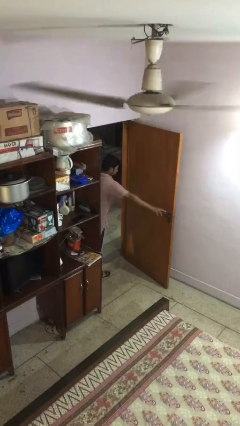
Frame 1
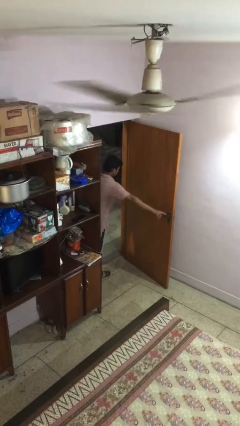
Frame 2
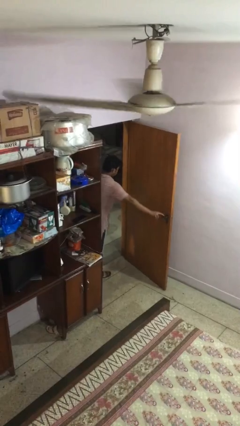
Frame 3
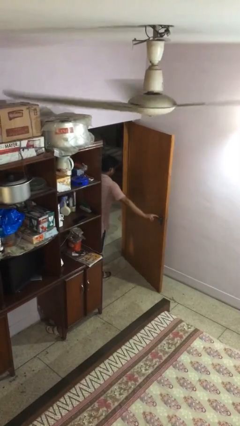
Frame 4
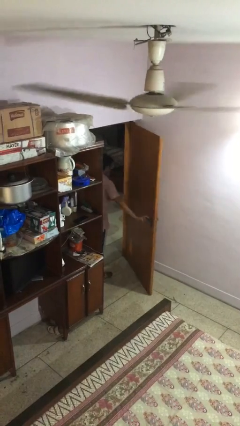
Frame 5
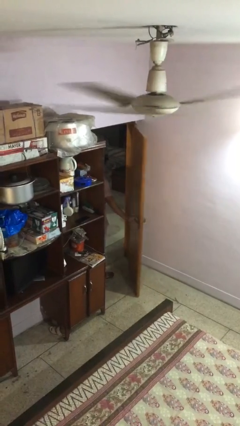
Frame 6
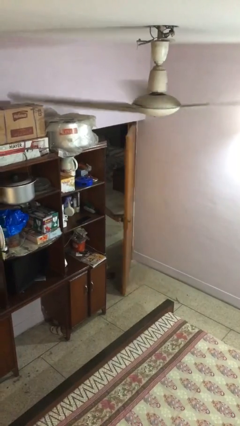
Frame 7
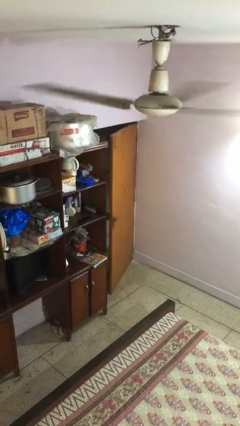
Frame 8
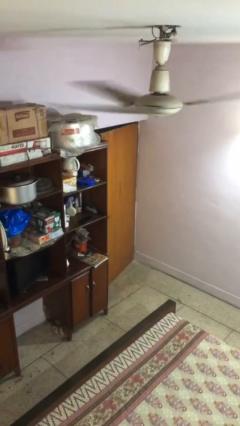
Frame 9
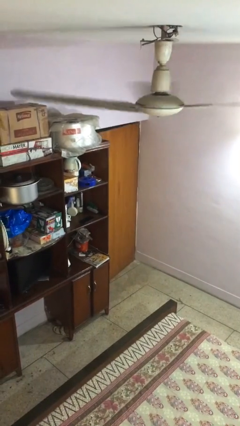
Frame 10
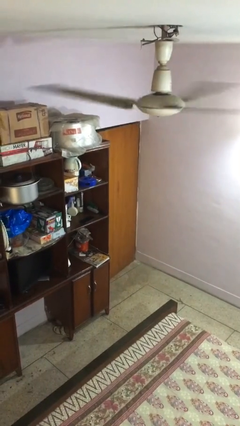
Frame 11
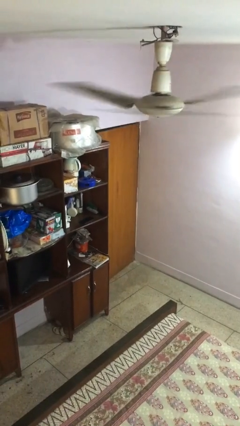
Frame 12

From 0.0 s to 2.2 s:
person closes facility door

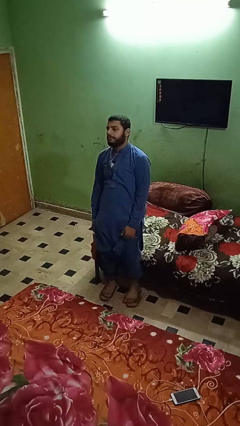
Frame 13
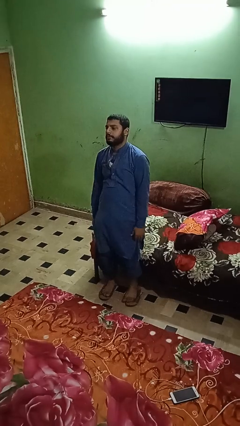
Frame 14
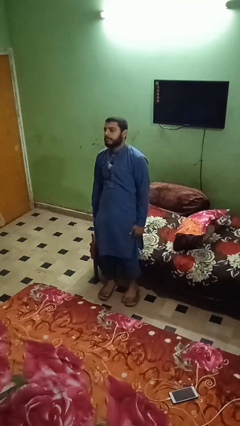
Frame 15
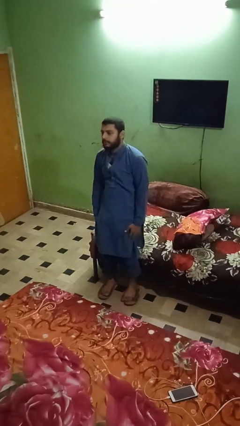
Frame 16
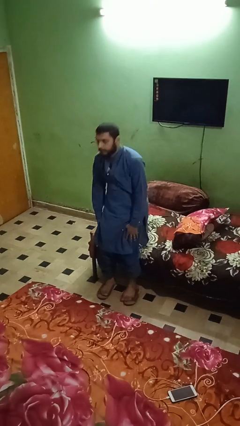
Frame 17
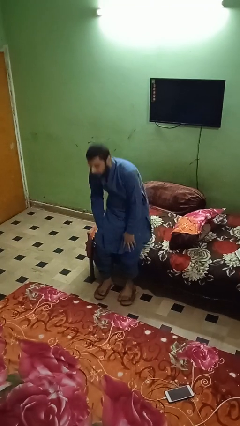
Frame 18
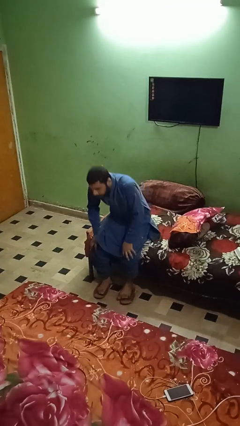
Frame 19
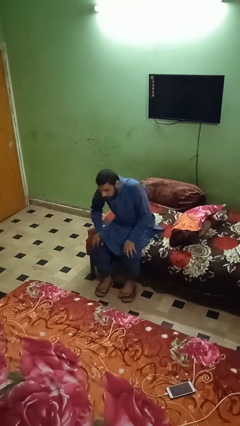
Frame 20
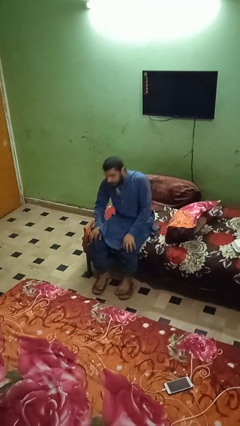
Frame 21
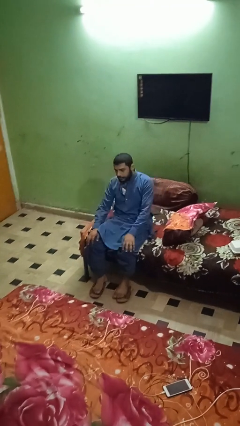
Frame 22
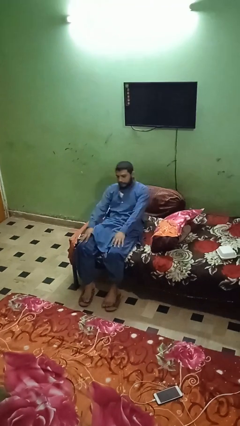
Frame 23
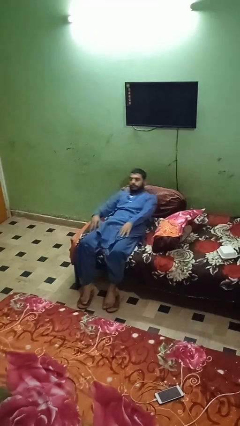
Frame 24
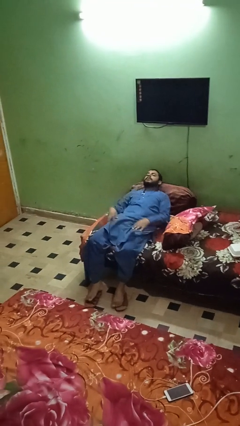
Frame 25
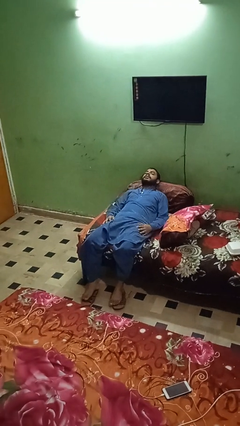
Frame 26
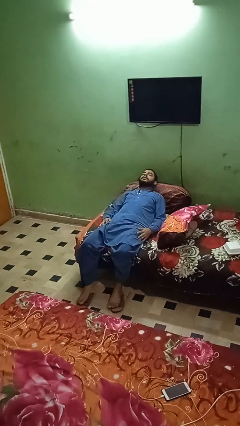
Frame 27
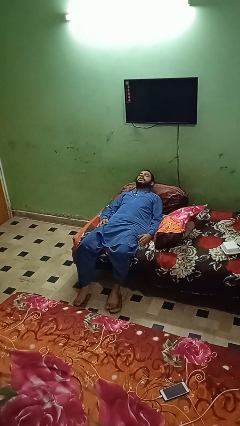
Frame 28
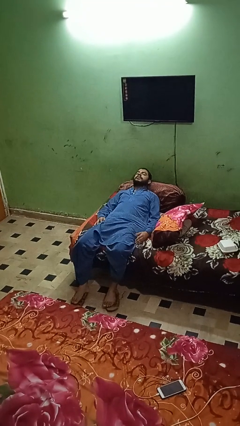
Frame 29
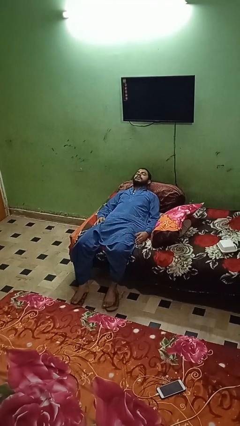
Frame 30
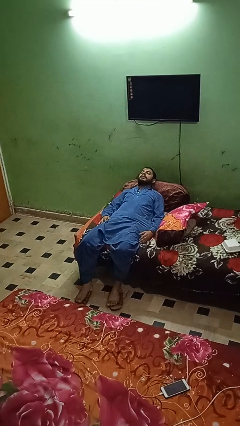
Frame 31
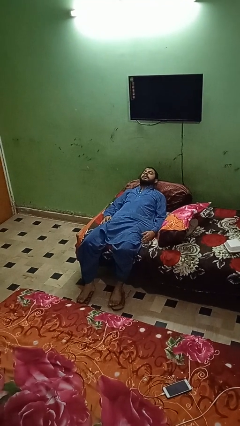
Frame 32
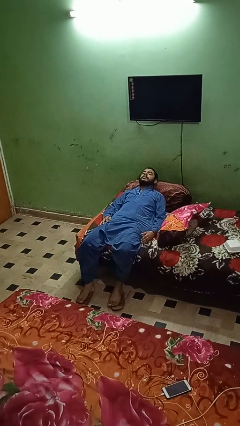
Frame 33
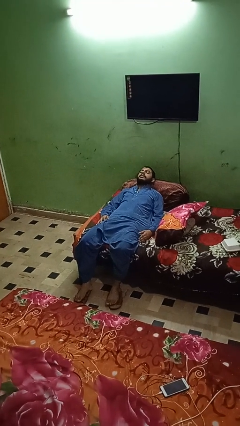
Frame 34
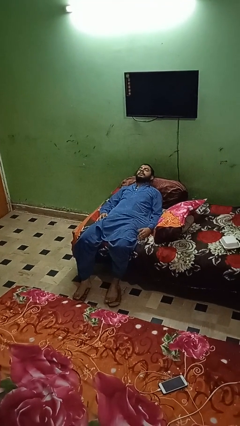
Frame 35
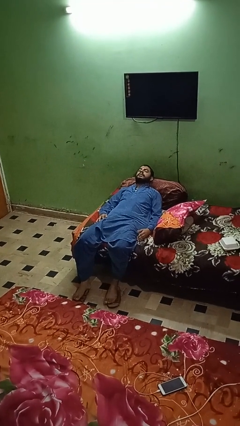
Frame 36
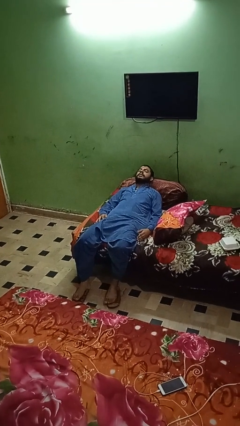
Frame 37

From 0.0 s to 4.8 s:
person lies down on couch

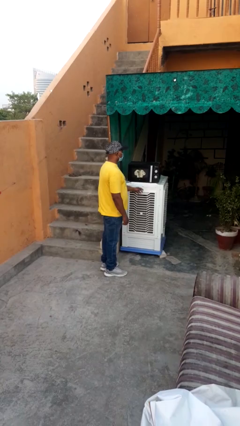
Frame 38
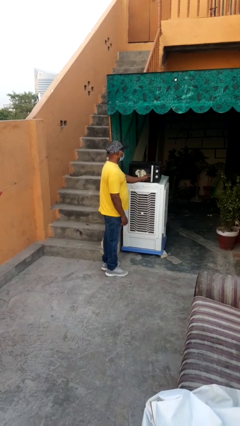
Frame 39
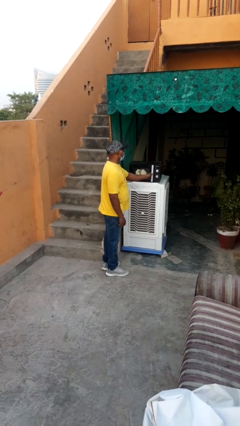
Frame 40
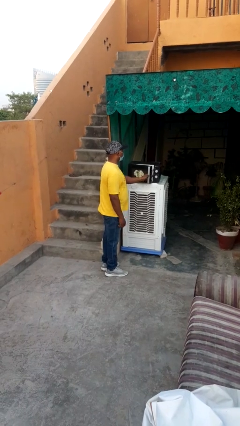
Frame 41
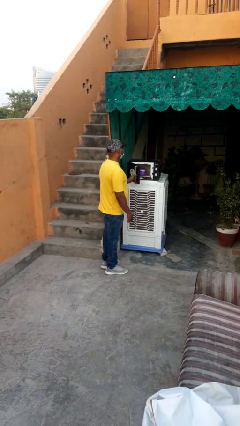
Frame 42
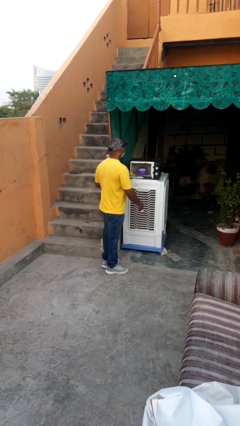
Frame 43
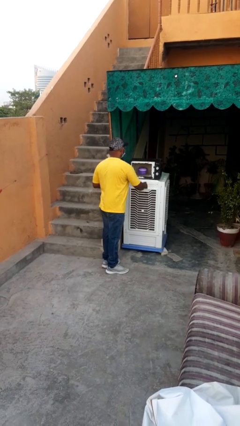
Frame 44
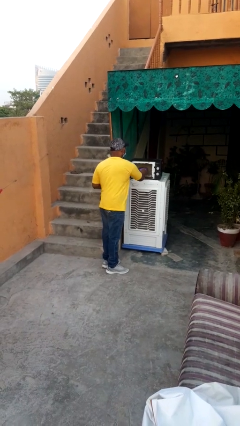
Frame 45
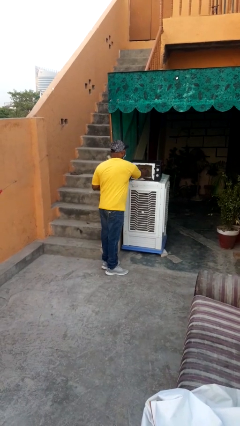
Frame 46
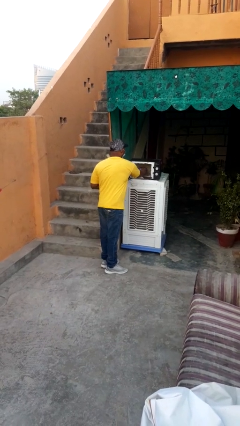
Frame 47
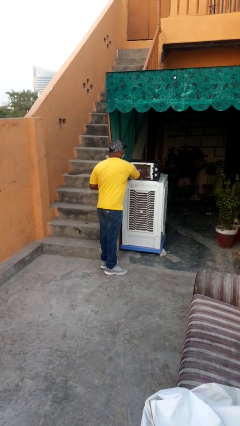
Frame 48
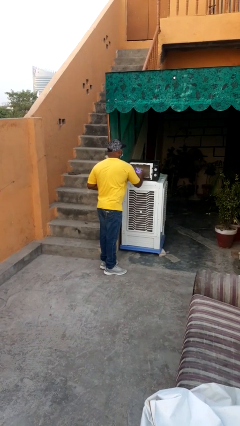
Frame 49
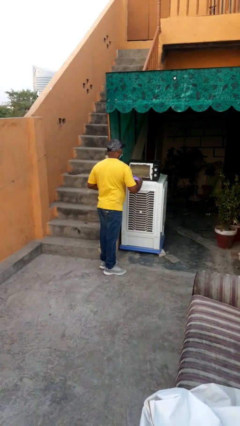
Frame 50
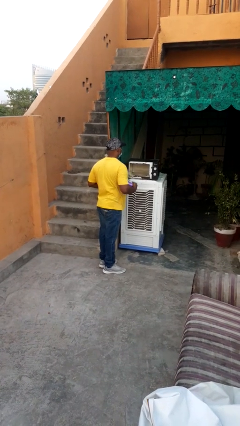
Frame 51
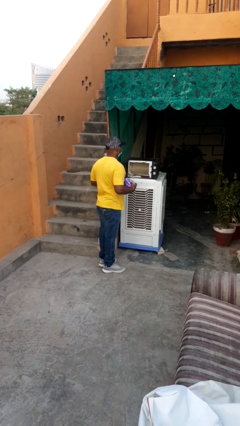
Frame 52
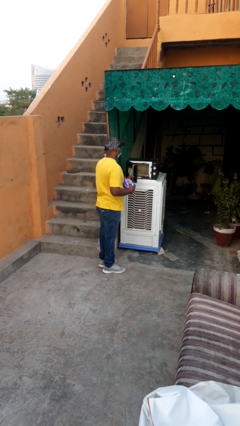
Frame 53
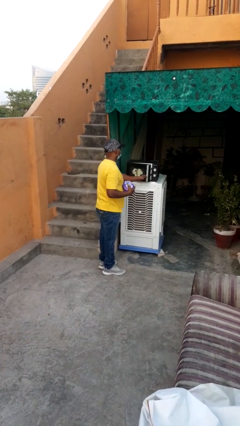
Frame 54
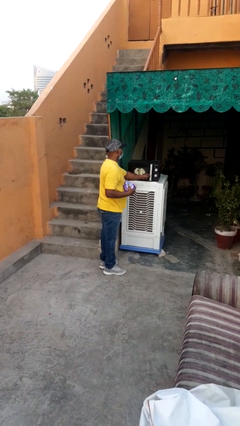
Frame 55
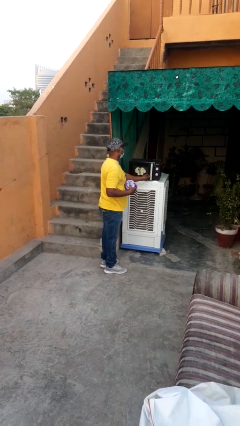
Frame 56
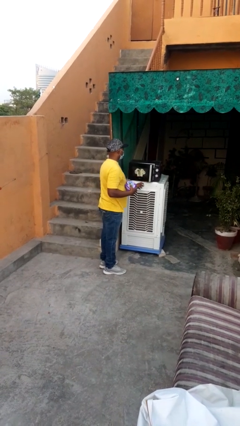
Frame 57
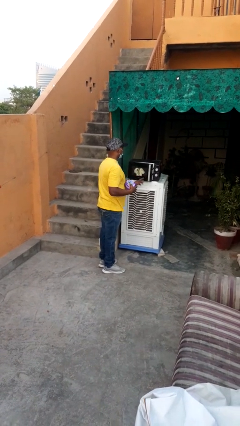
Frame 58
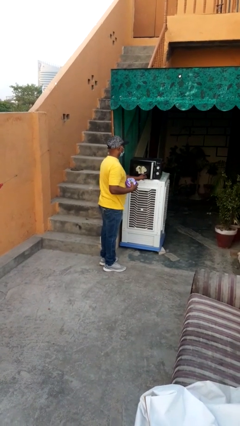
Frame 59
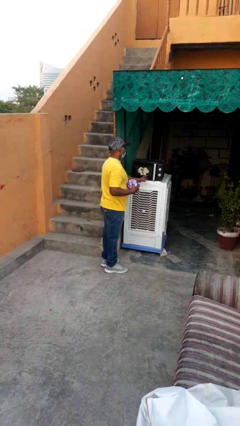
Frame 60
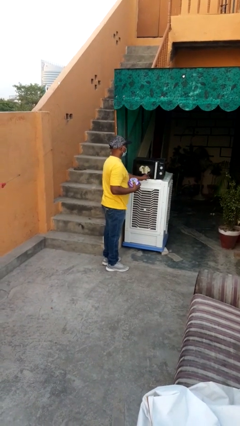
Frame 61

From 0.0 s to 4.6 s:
person takes object from microwave

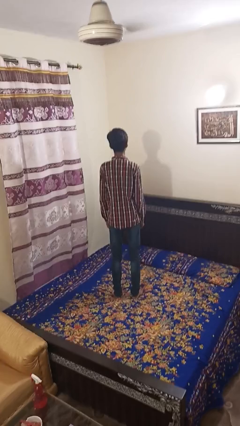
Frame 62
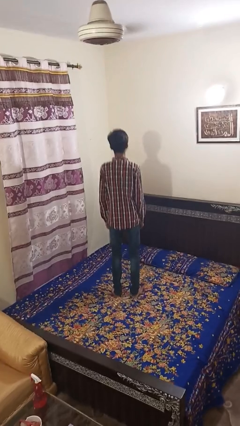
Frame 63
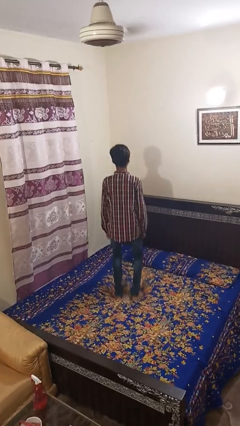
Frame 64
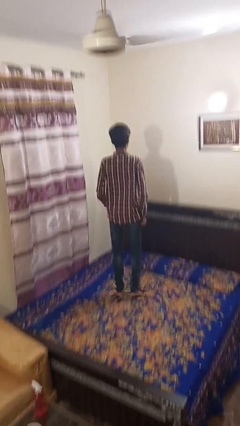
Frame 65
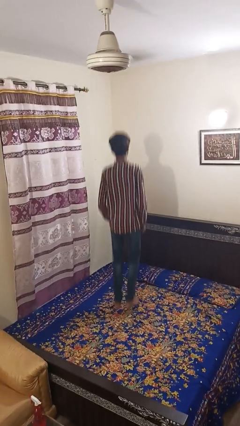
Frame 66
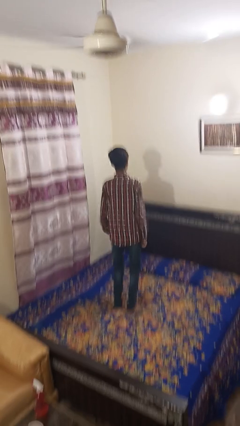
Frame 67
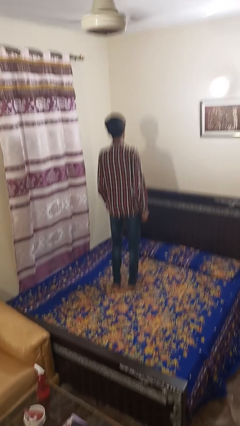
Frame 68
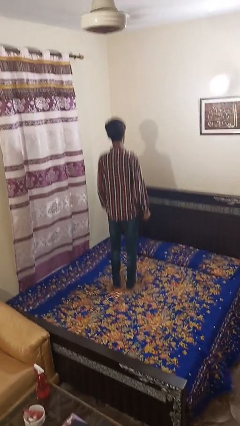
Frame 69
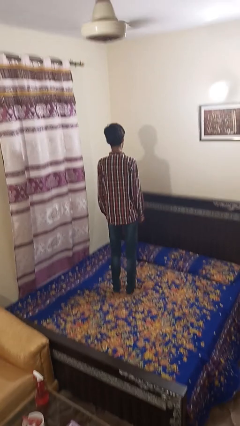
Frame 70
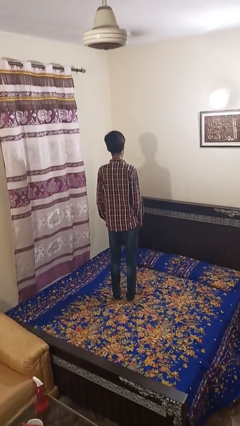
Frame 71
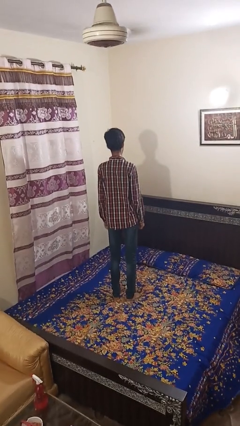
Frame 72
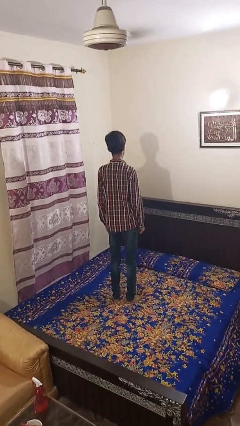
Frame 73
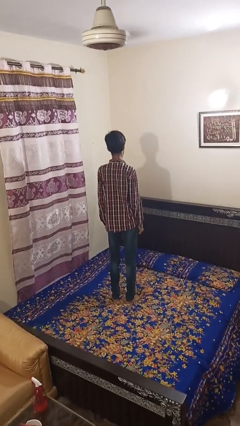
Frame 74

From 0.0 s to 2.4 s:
person jumps on bed

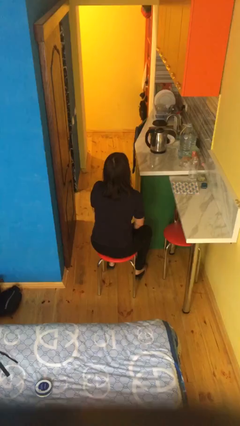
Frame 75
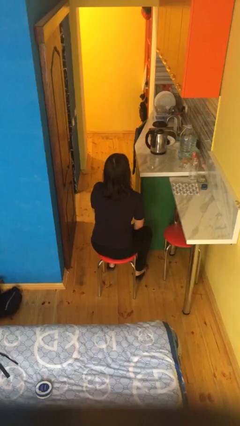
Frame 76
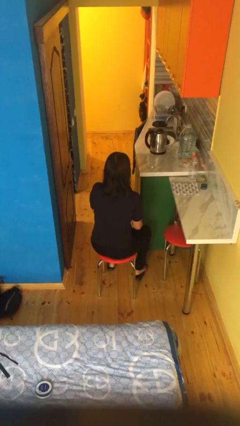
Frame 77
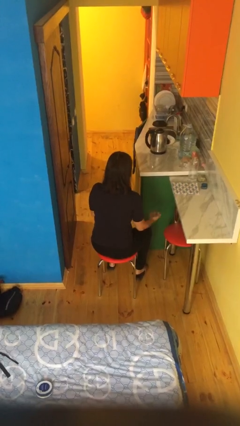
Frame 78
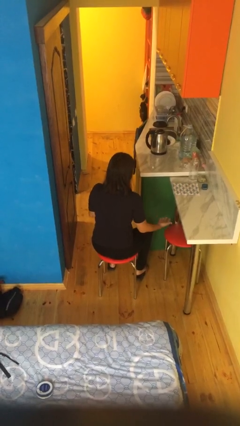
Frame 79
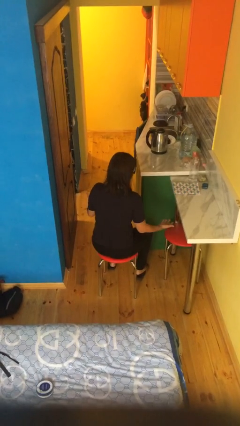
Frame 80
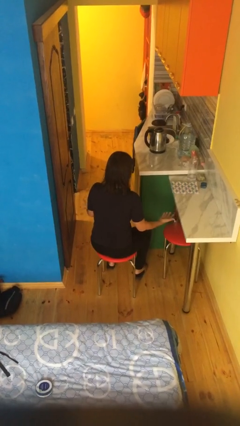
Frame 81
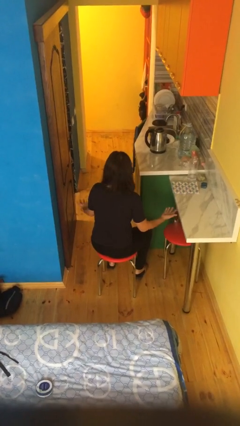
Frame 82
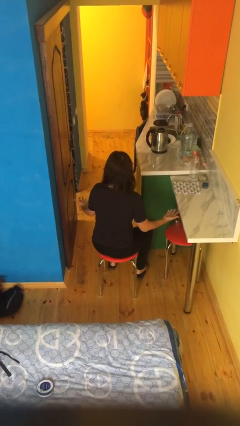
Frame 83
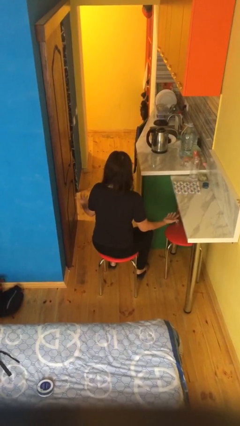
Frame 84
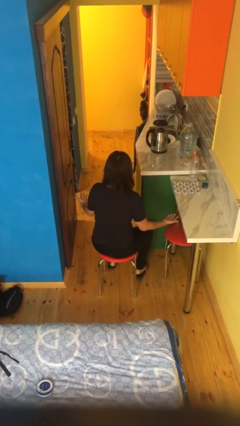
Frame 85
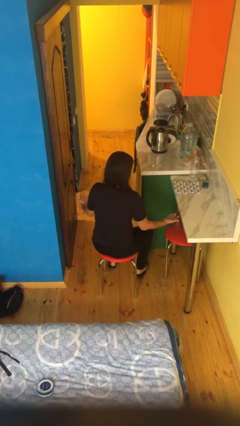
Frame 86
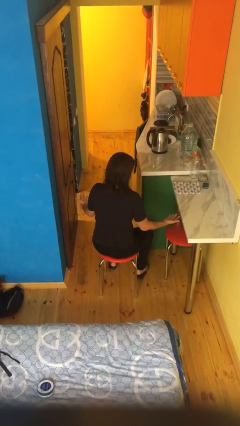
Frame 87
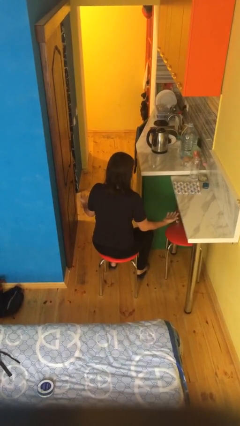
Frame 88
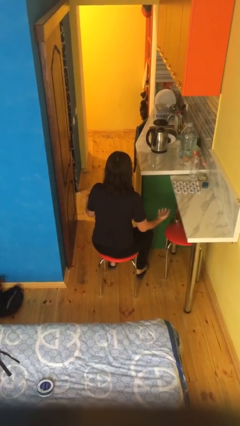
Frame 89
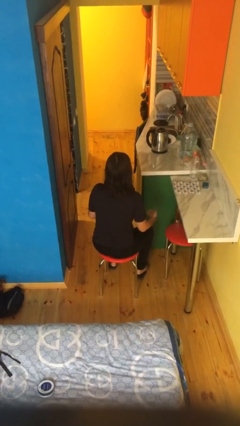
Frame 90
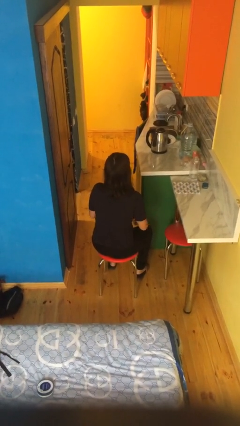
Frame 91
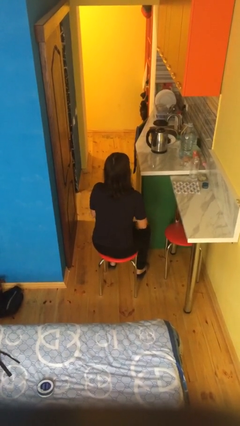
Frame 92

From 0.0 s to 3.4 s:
person looks at hands in lap
